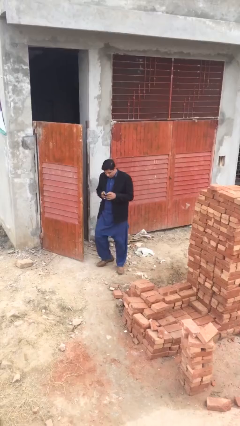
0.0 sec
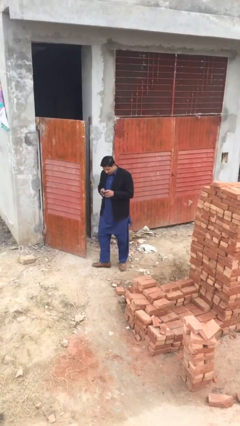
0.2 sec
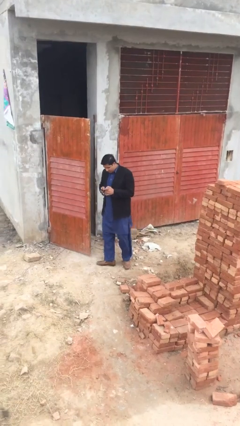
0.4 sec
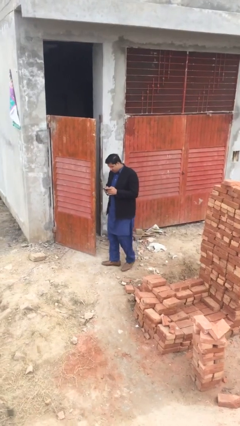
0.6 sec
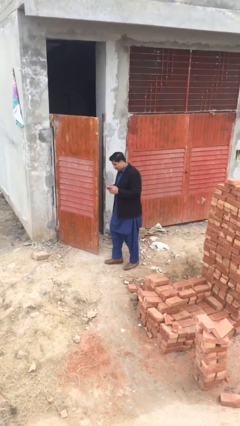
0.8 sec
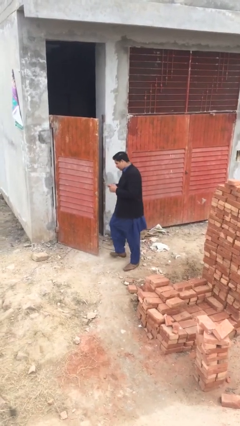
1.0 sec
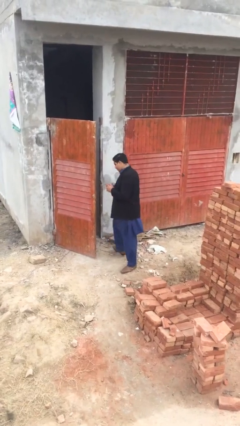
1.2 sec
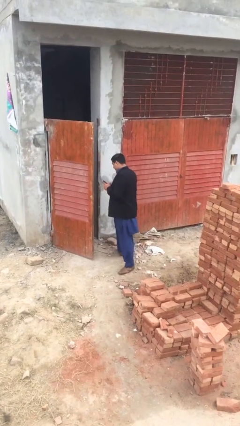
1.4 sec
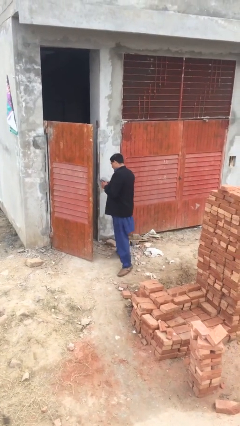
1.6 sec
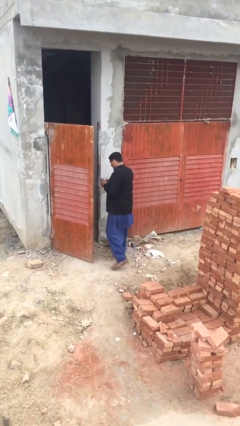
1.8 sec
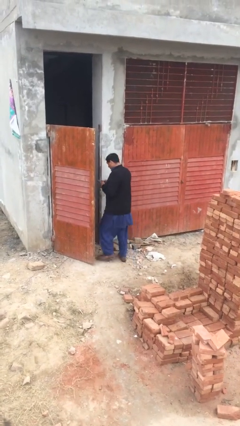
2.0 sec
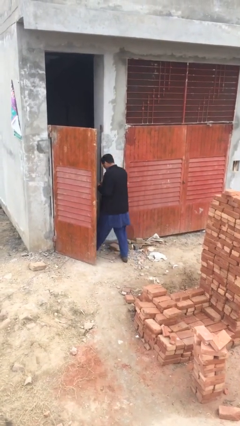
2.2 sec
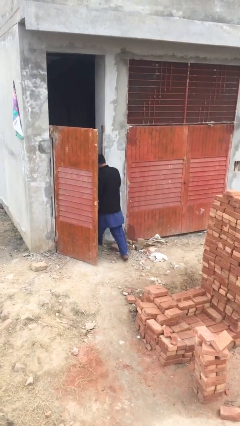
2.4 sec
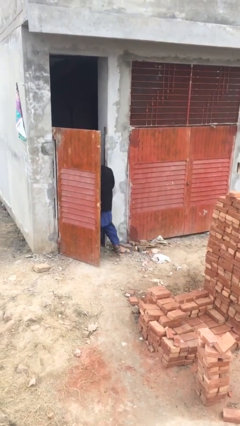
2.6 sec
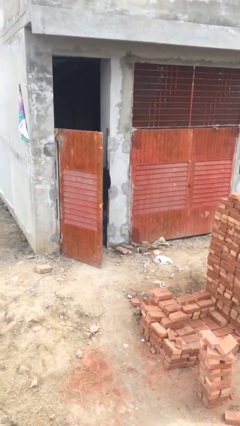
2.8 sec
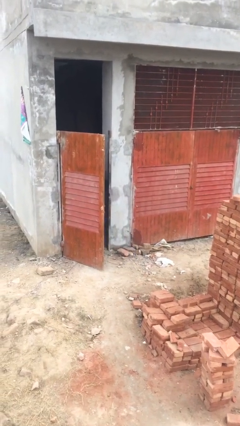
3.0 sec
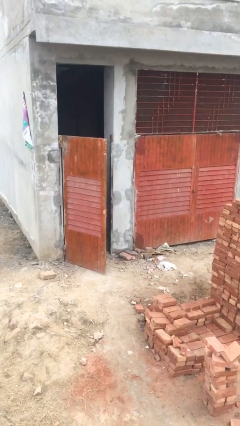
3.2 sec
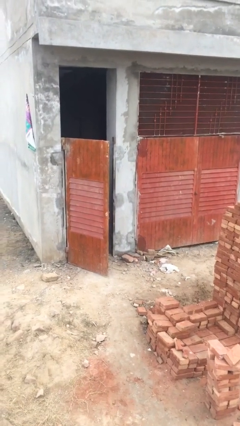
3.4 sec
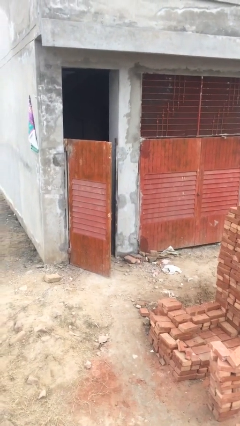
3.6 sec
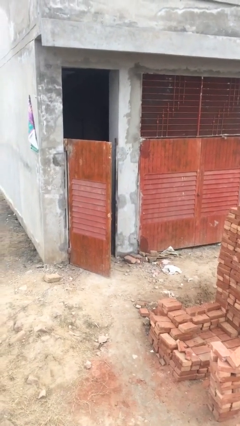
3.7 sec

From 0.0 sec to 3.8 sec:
person exits scene through structure

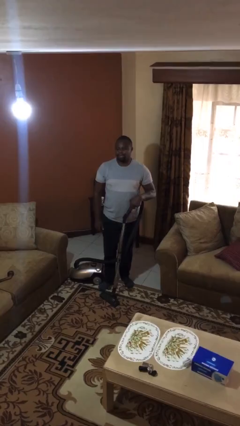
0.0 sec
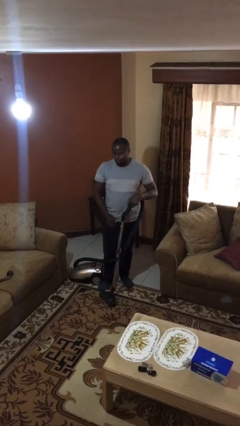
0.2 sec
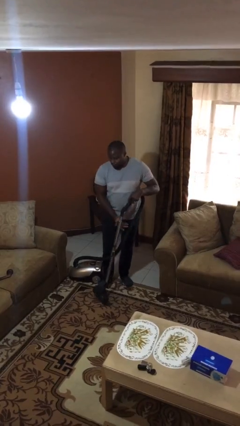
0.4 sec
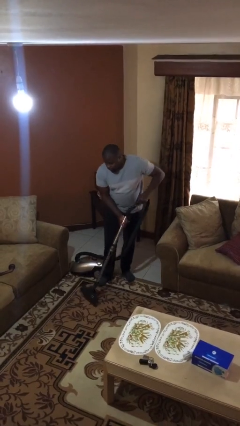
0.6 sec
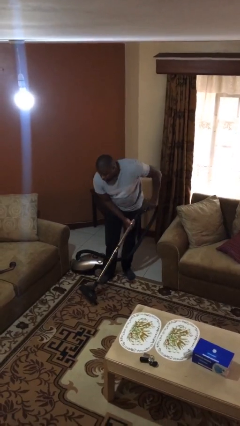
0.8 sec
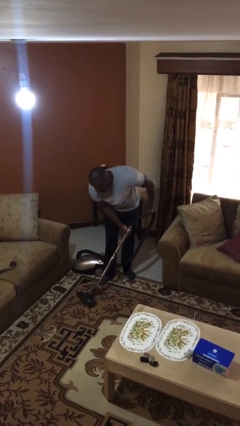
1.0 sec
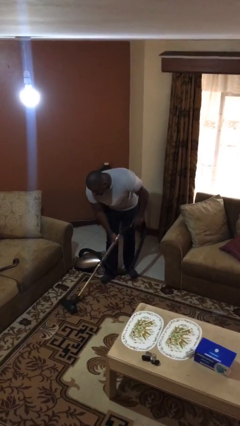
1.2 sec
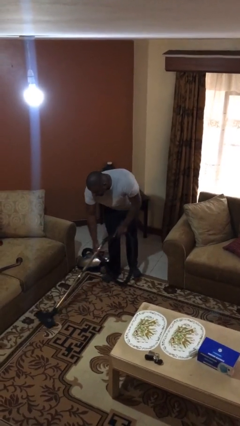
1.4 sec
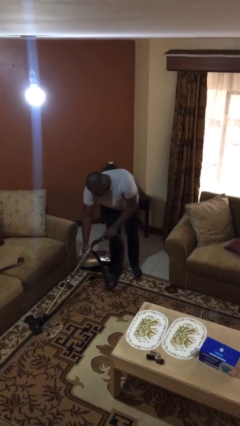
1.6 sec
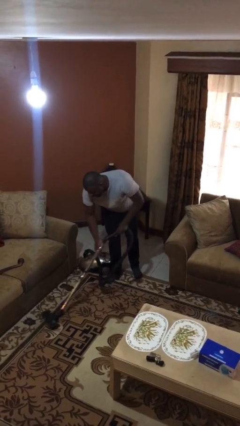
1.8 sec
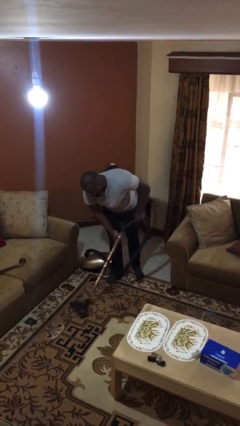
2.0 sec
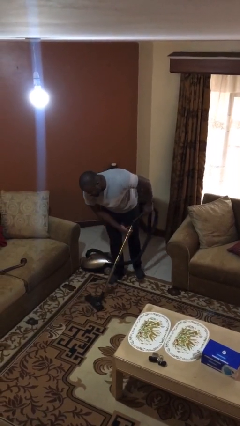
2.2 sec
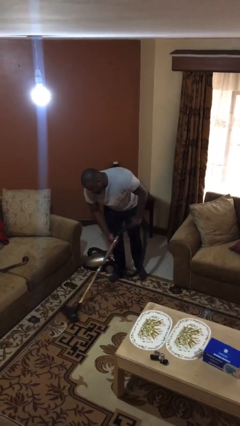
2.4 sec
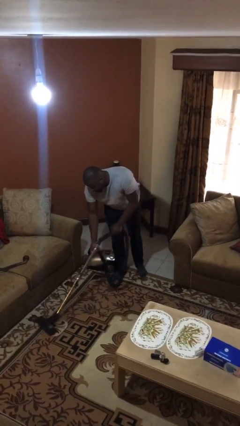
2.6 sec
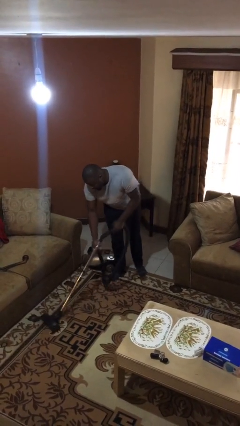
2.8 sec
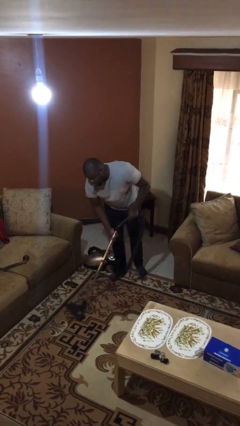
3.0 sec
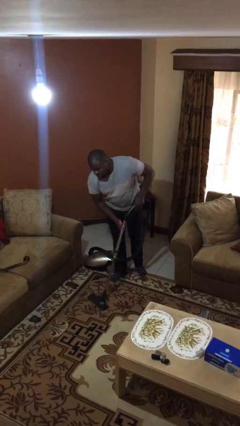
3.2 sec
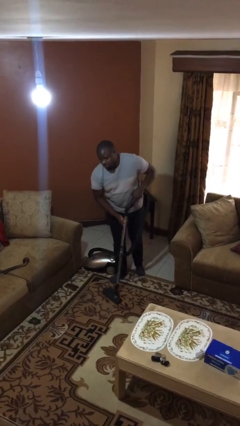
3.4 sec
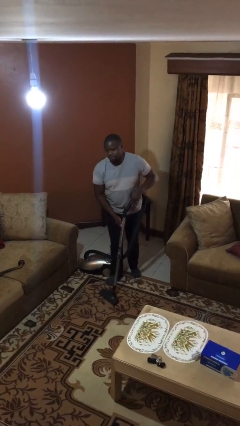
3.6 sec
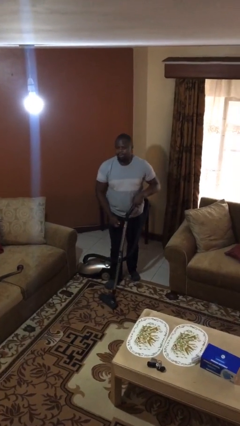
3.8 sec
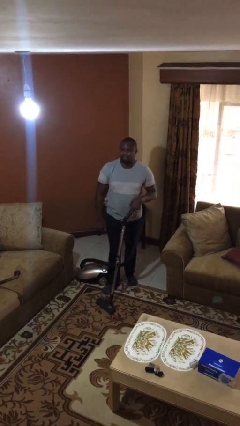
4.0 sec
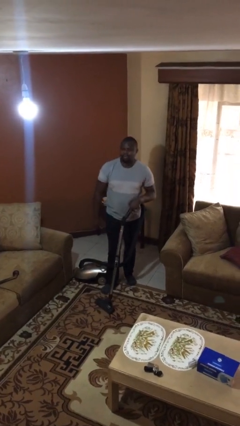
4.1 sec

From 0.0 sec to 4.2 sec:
person vacuums carpet

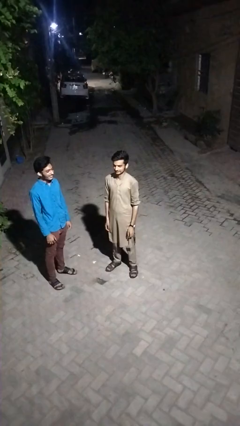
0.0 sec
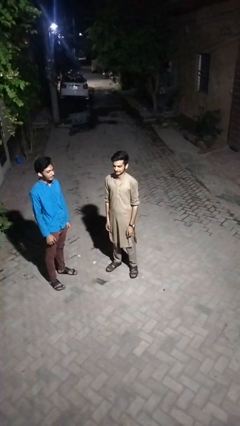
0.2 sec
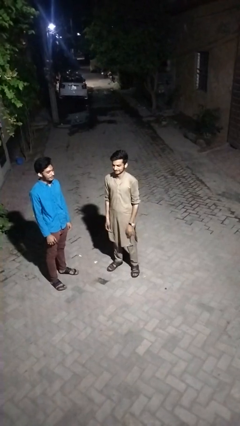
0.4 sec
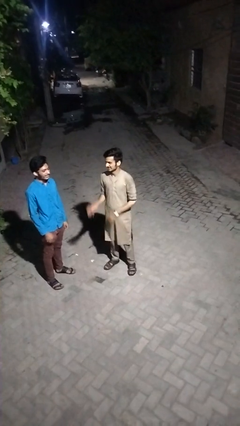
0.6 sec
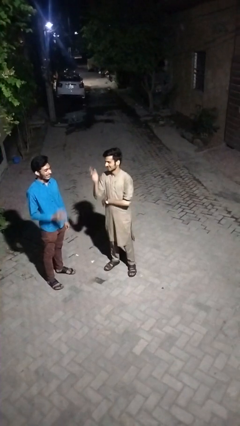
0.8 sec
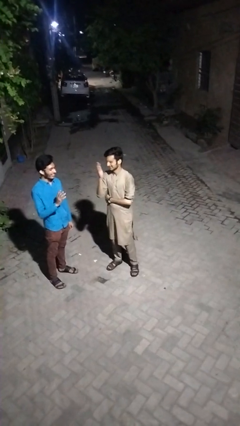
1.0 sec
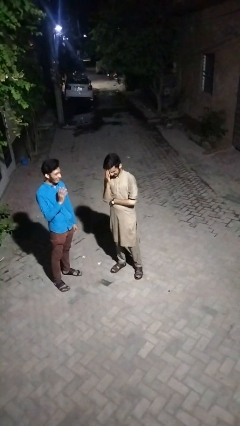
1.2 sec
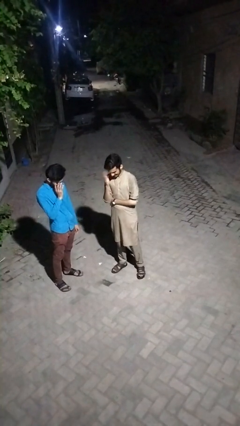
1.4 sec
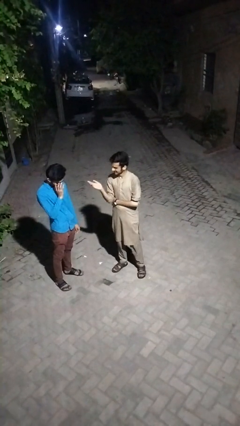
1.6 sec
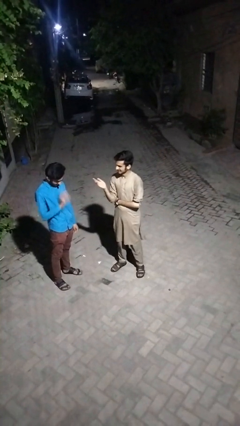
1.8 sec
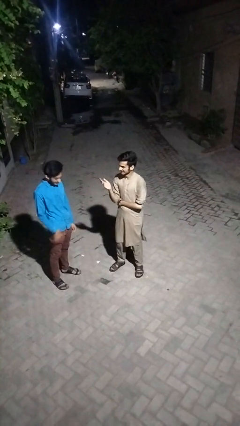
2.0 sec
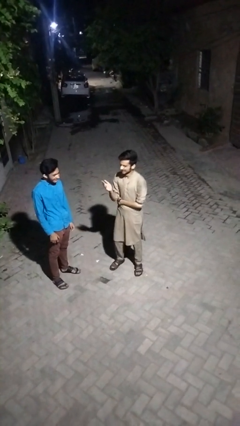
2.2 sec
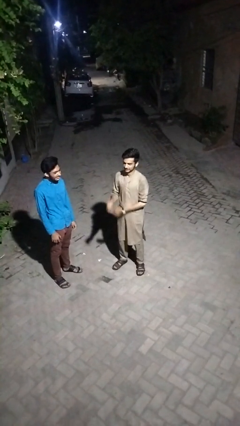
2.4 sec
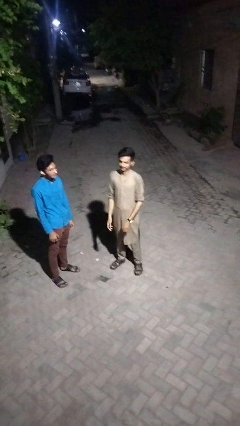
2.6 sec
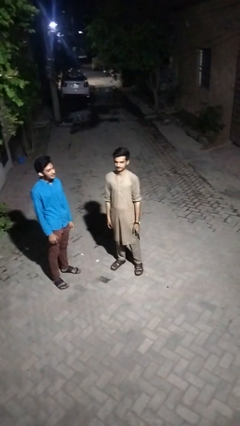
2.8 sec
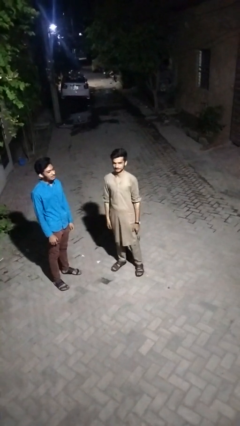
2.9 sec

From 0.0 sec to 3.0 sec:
person laughs with person

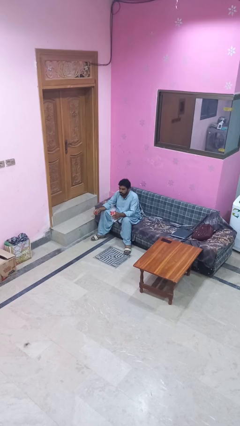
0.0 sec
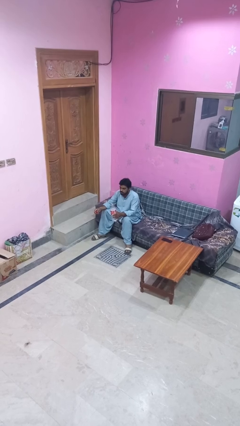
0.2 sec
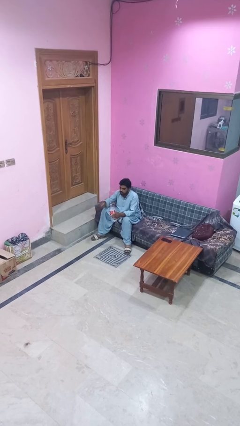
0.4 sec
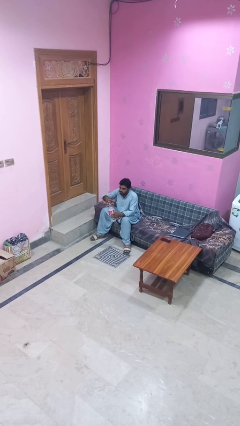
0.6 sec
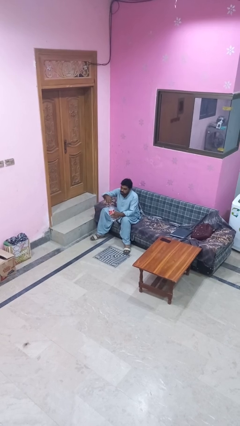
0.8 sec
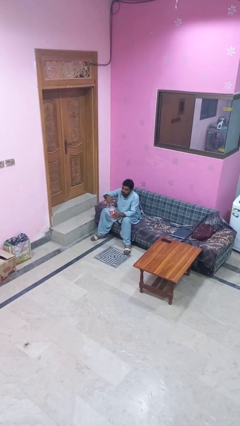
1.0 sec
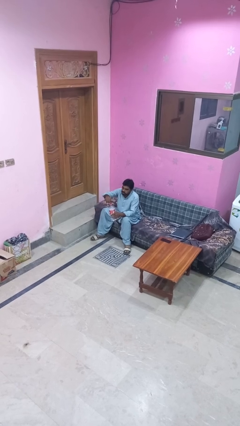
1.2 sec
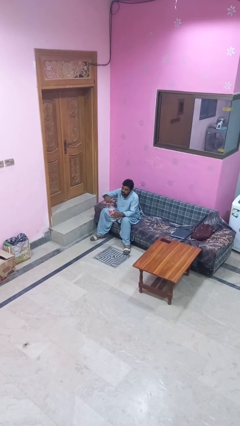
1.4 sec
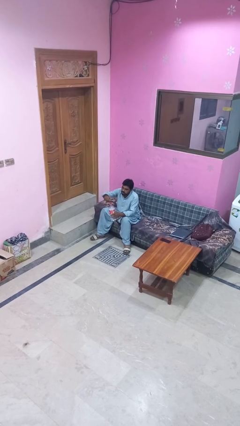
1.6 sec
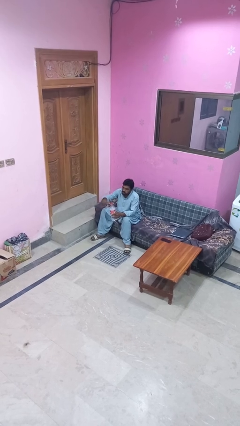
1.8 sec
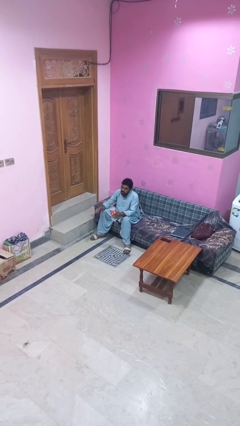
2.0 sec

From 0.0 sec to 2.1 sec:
person screws lid to bottle

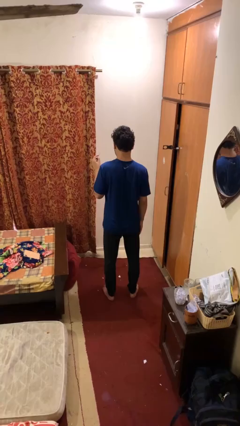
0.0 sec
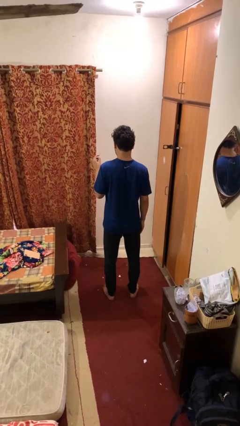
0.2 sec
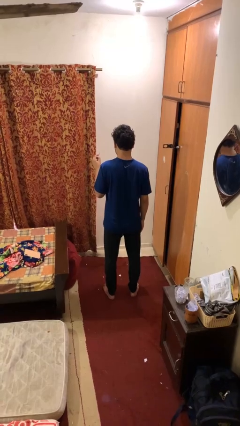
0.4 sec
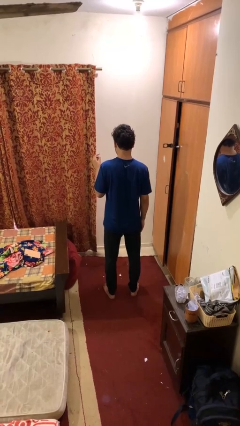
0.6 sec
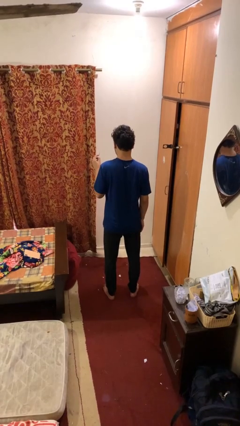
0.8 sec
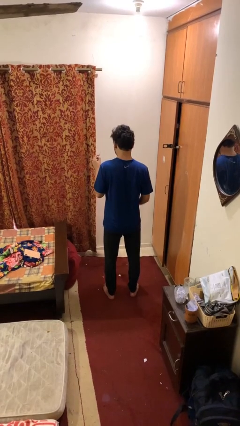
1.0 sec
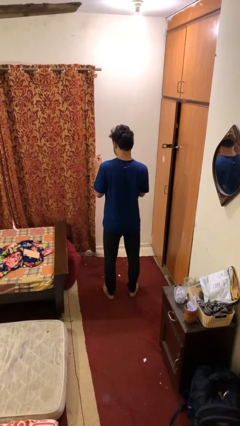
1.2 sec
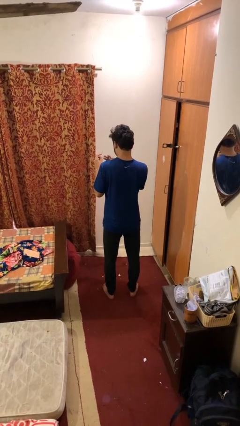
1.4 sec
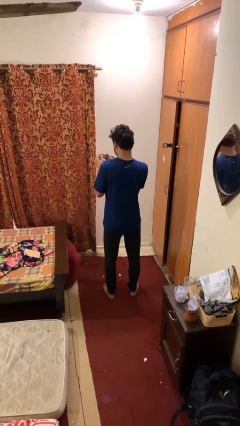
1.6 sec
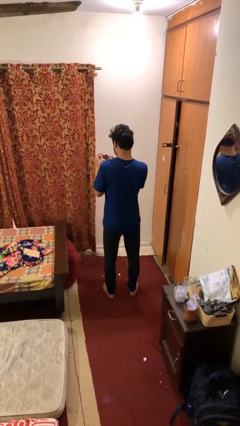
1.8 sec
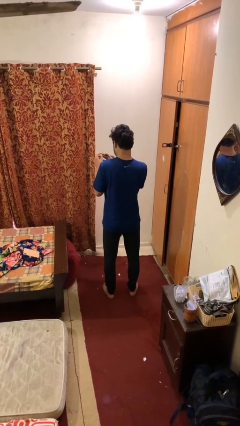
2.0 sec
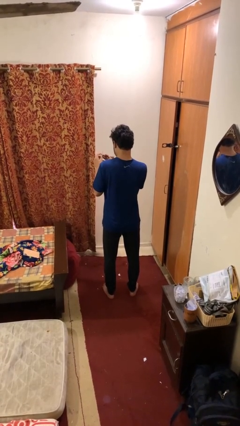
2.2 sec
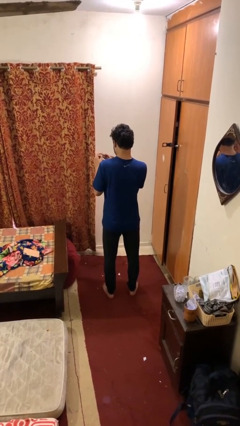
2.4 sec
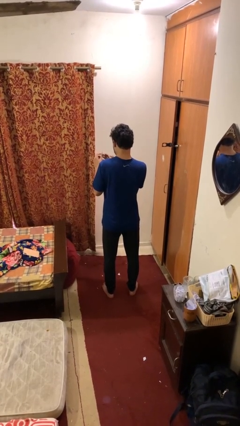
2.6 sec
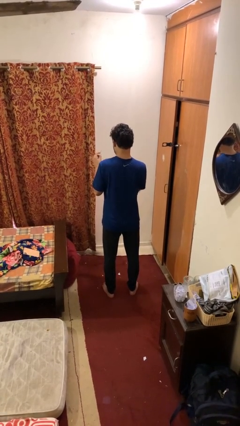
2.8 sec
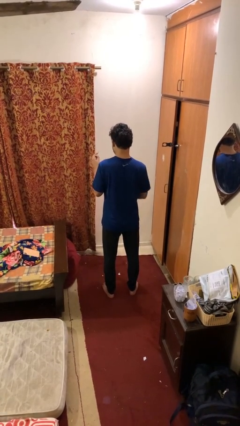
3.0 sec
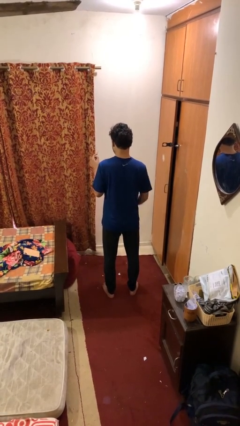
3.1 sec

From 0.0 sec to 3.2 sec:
person files fingernails

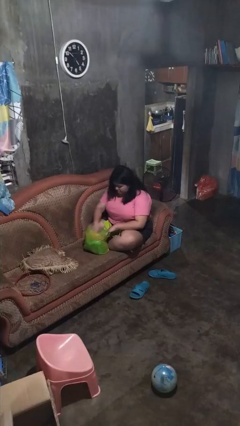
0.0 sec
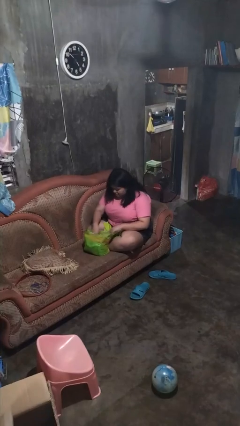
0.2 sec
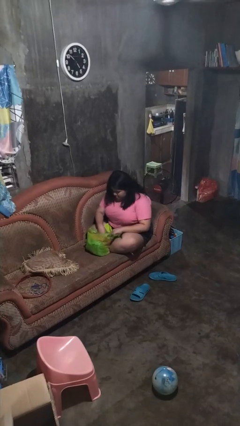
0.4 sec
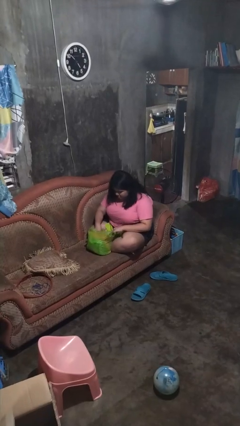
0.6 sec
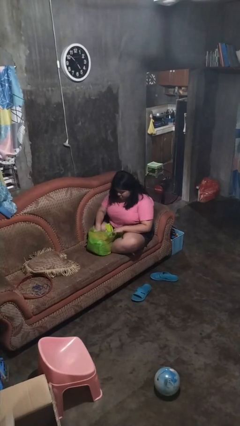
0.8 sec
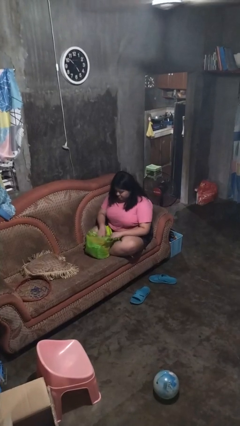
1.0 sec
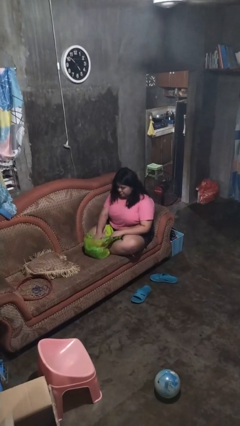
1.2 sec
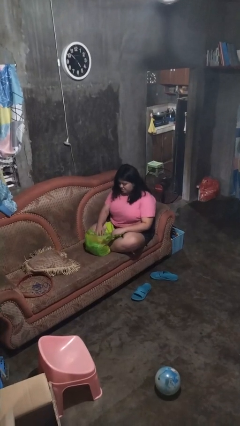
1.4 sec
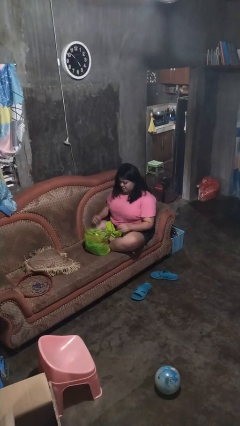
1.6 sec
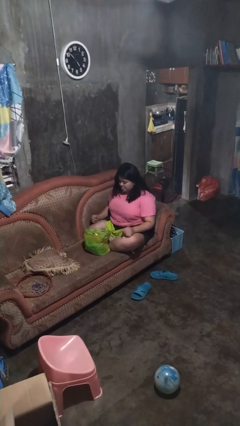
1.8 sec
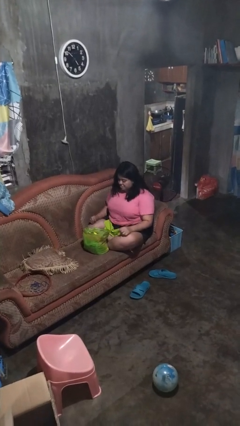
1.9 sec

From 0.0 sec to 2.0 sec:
person searches in bag
